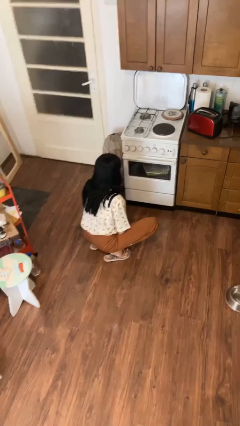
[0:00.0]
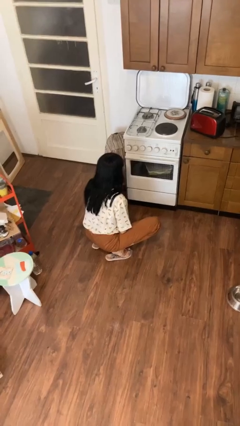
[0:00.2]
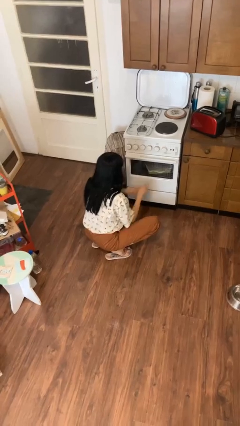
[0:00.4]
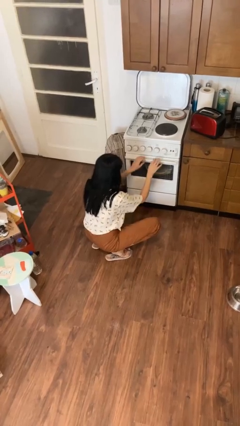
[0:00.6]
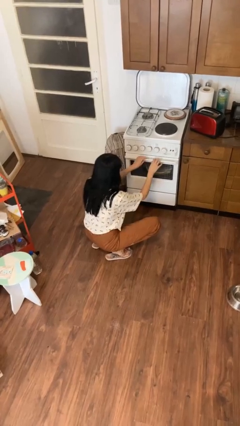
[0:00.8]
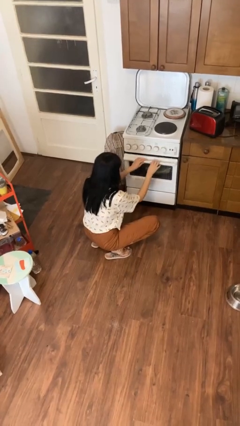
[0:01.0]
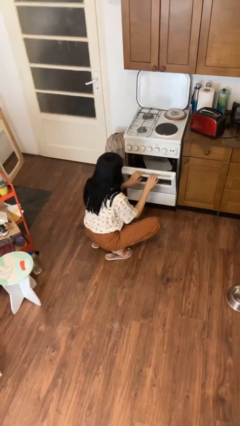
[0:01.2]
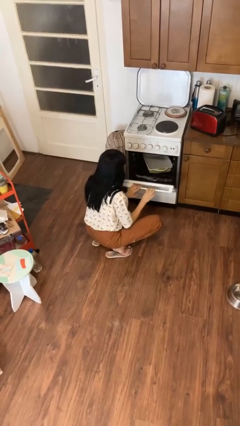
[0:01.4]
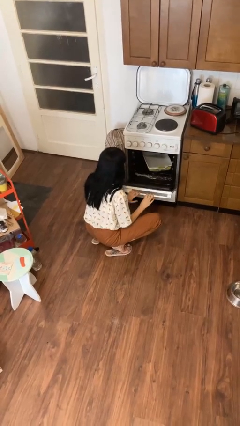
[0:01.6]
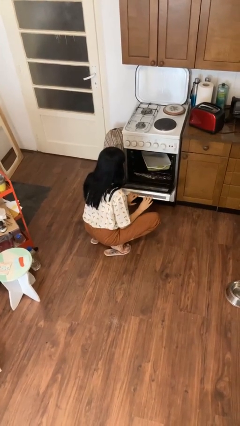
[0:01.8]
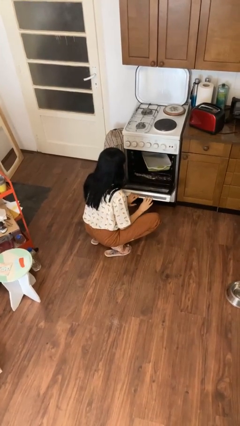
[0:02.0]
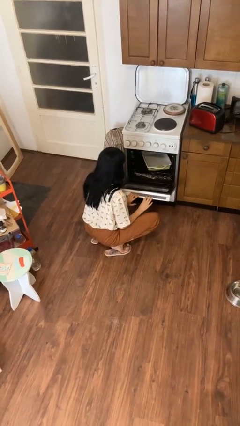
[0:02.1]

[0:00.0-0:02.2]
person opens oven door

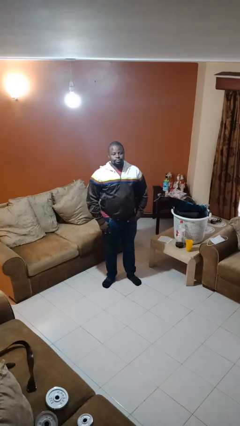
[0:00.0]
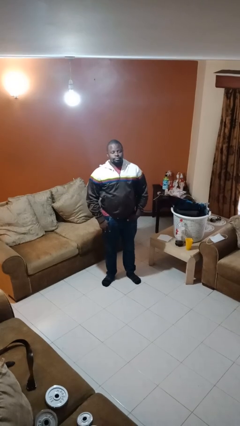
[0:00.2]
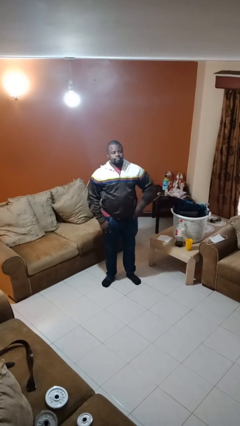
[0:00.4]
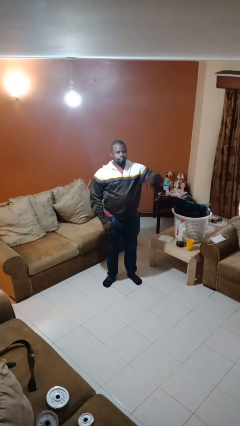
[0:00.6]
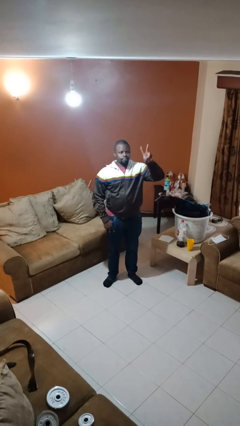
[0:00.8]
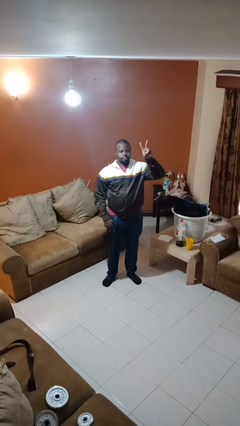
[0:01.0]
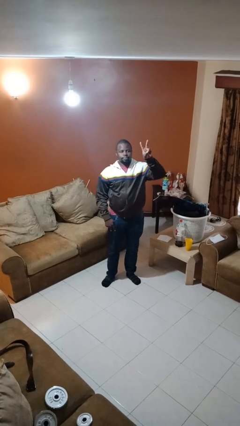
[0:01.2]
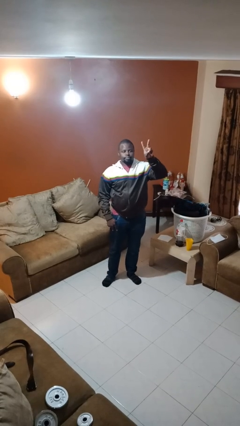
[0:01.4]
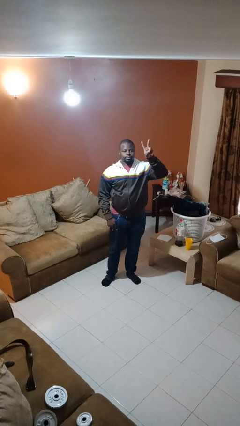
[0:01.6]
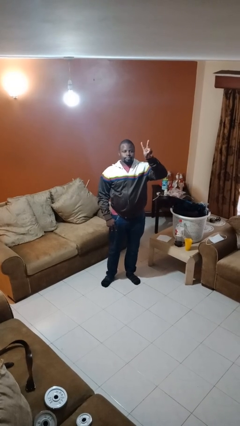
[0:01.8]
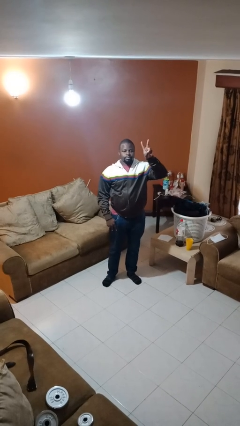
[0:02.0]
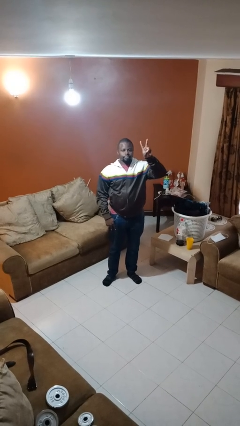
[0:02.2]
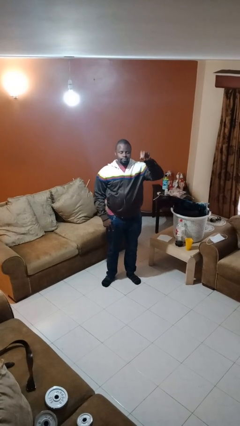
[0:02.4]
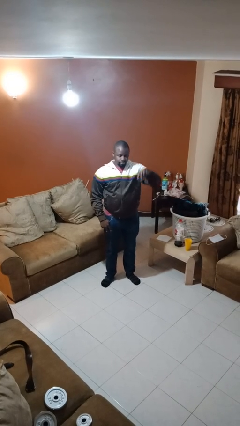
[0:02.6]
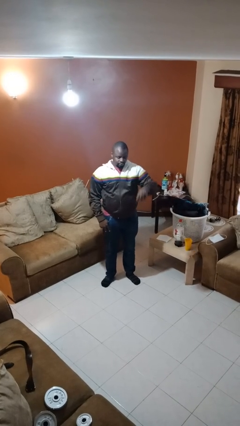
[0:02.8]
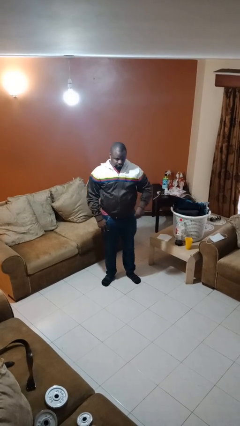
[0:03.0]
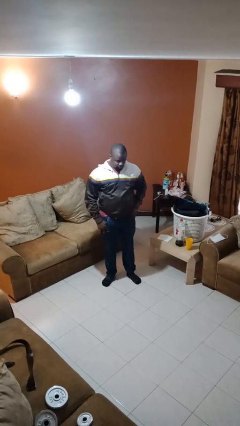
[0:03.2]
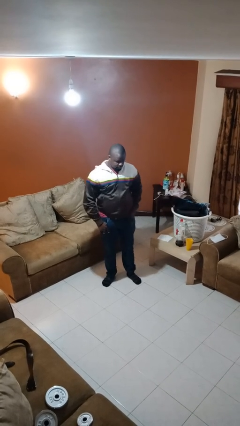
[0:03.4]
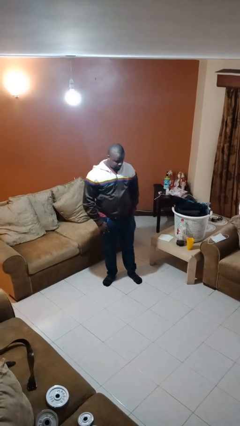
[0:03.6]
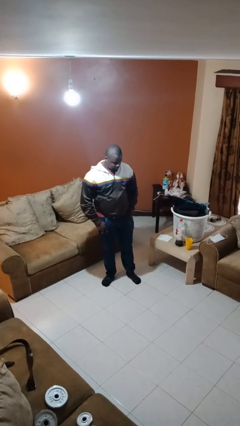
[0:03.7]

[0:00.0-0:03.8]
person gestures peace

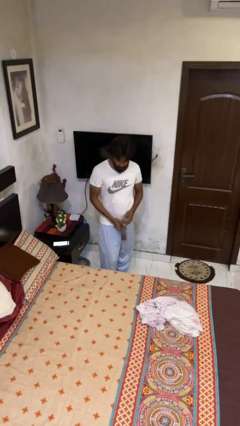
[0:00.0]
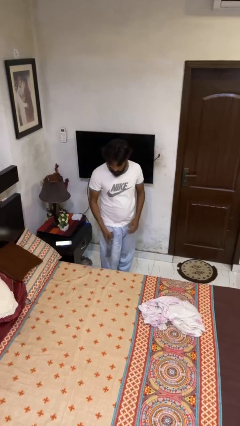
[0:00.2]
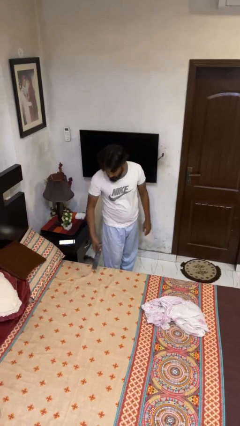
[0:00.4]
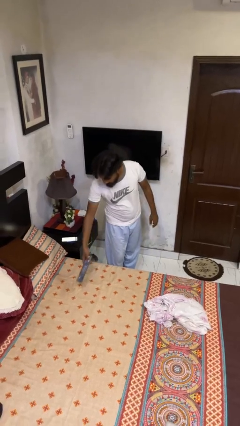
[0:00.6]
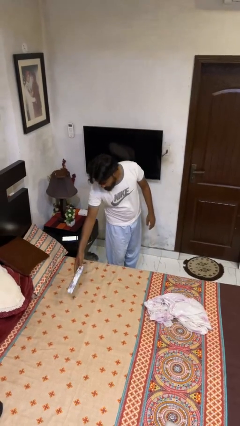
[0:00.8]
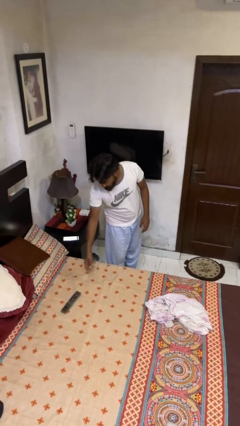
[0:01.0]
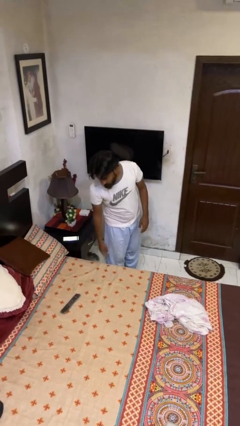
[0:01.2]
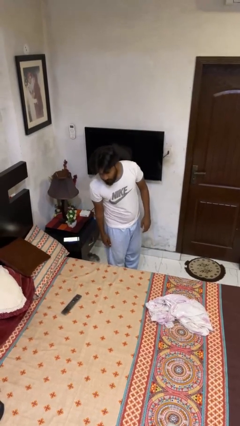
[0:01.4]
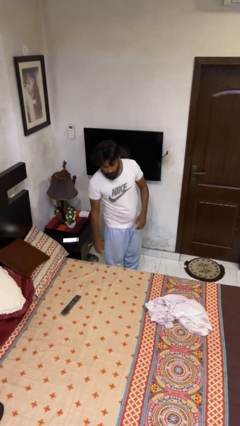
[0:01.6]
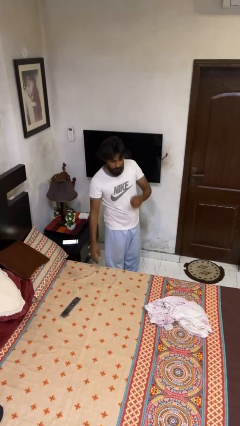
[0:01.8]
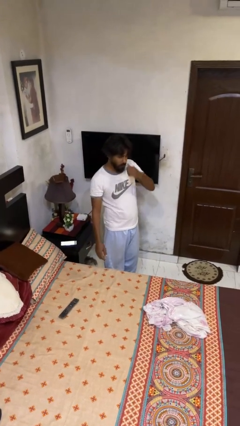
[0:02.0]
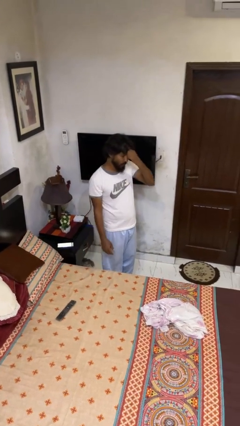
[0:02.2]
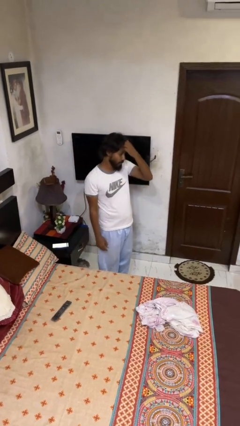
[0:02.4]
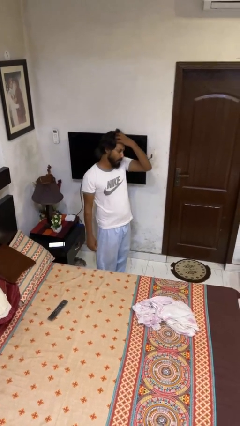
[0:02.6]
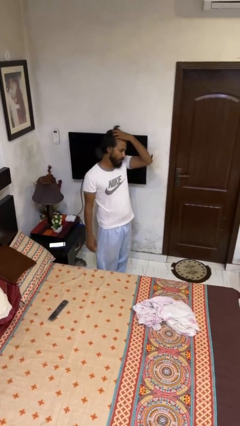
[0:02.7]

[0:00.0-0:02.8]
person puts down object on bed

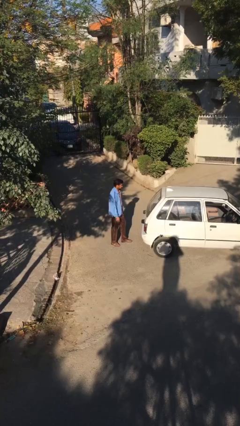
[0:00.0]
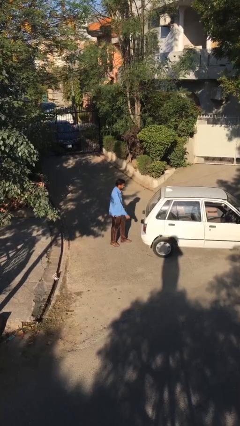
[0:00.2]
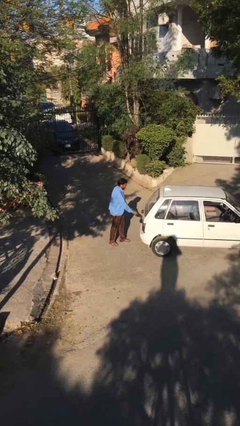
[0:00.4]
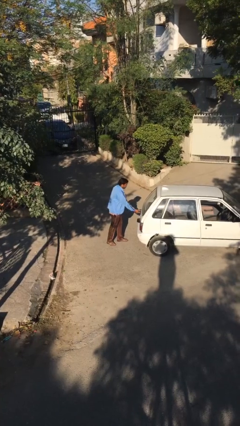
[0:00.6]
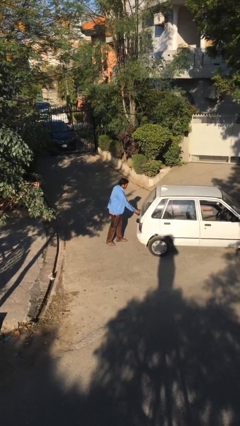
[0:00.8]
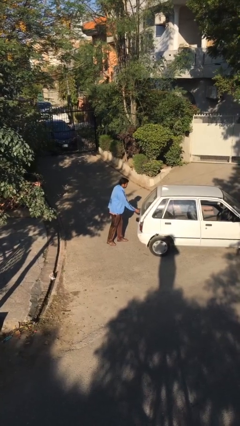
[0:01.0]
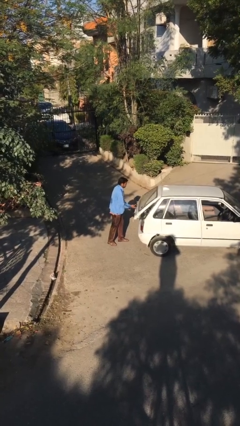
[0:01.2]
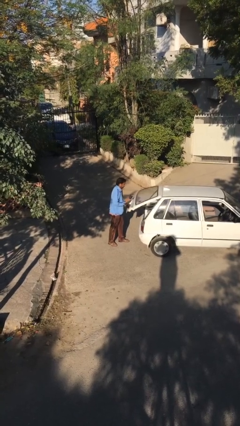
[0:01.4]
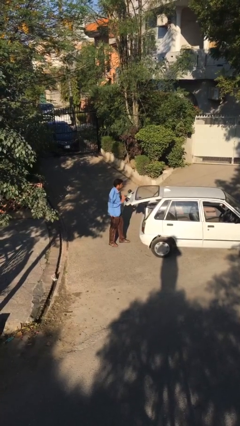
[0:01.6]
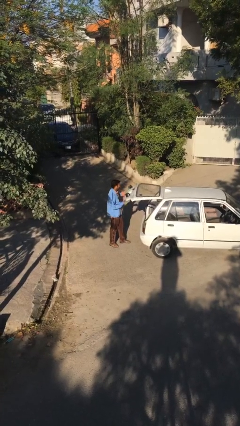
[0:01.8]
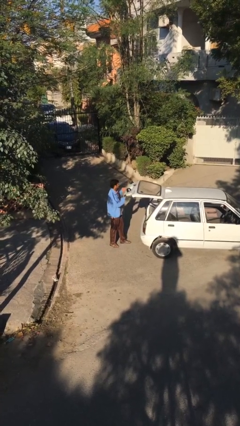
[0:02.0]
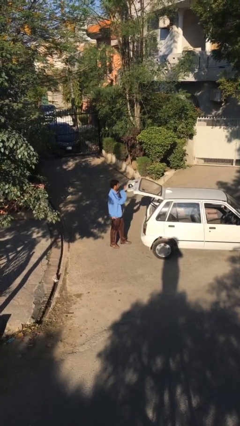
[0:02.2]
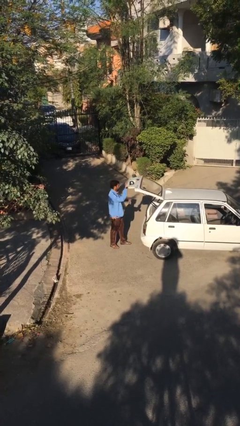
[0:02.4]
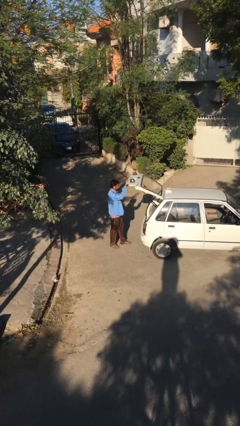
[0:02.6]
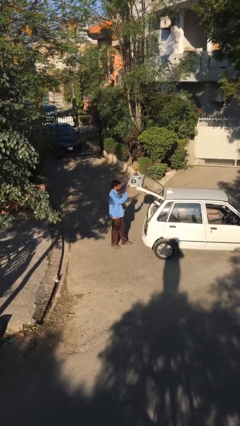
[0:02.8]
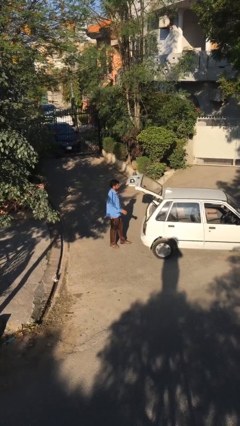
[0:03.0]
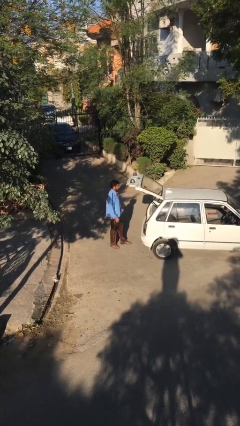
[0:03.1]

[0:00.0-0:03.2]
person opens car trunk

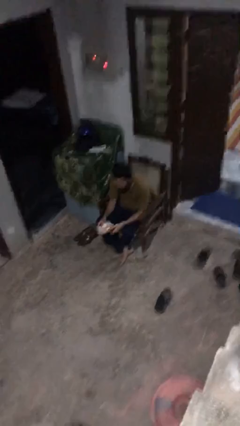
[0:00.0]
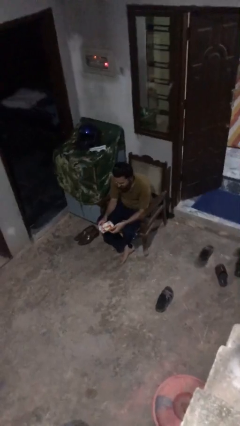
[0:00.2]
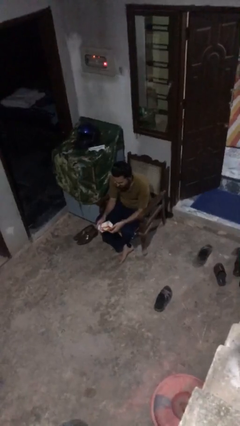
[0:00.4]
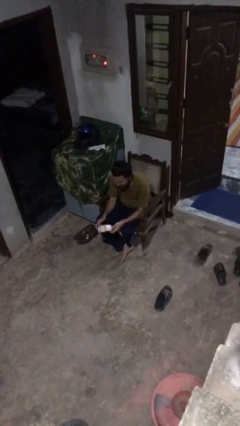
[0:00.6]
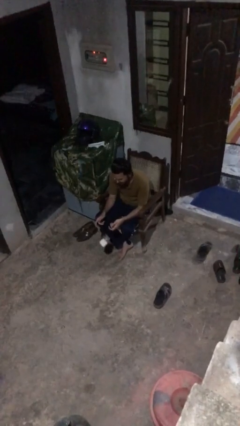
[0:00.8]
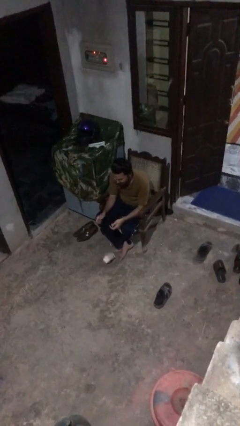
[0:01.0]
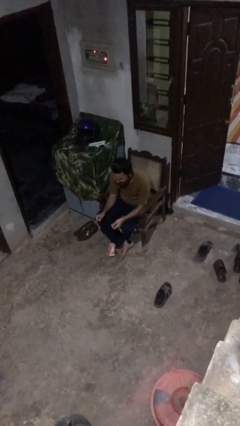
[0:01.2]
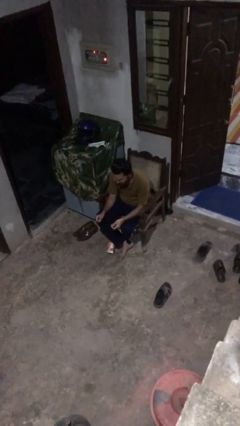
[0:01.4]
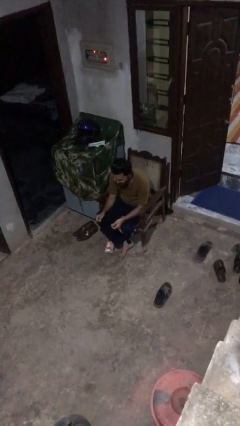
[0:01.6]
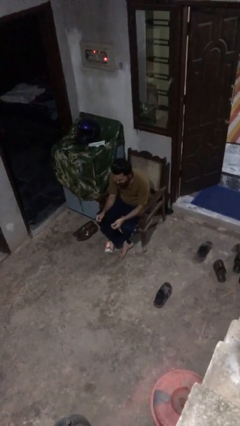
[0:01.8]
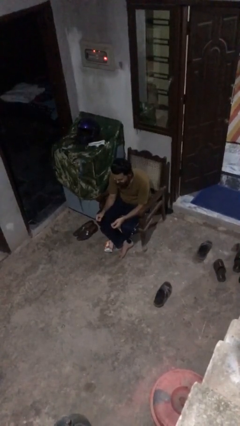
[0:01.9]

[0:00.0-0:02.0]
person drops object

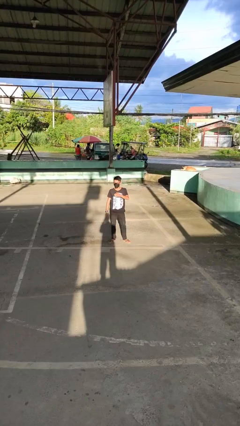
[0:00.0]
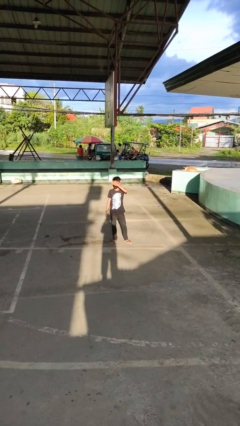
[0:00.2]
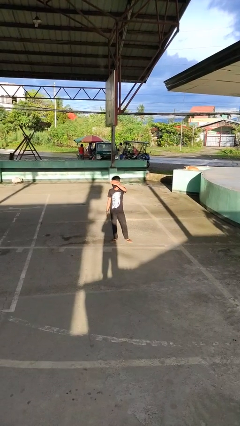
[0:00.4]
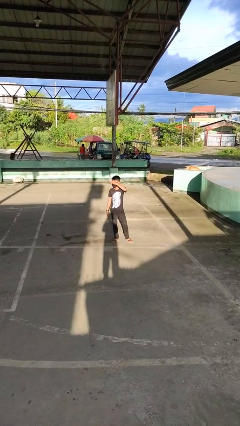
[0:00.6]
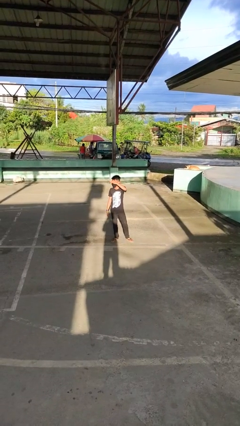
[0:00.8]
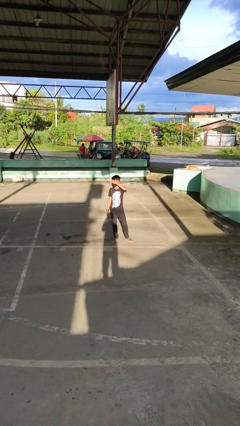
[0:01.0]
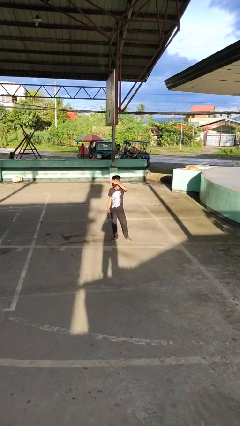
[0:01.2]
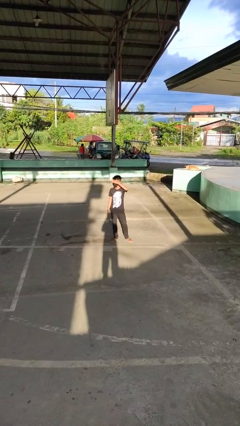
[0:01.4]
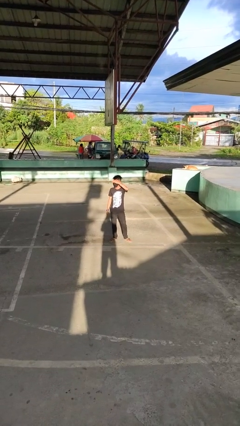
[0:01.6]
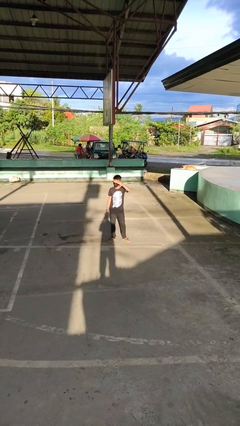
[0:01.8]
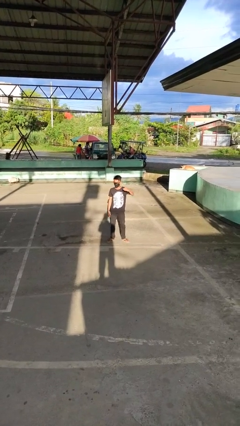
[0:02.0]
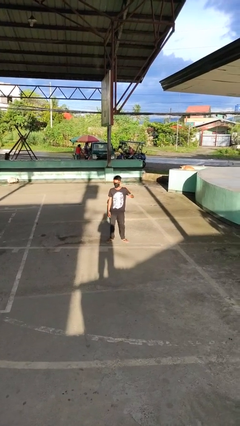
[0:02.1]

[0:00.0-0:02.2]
person shades eyes

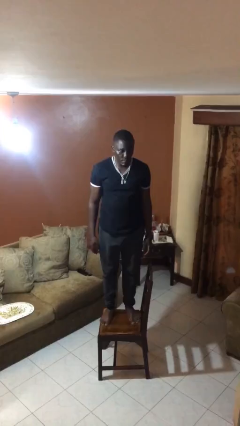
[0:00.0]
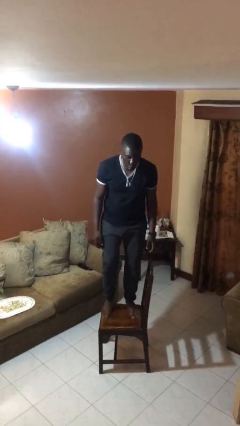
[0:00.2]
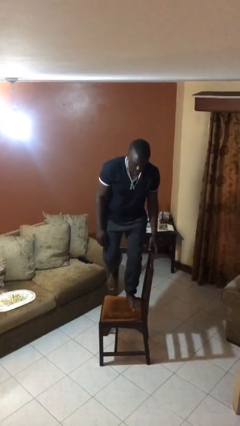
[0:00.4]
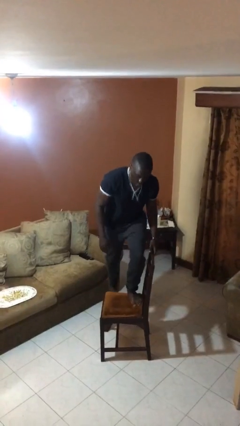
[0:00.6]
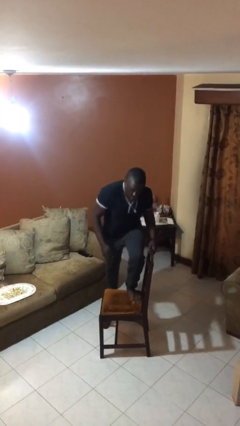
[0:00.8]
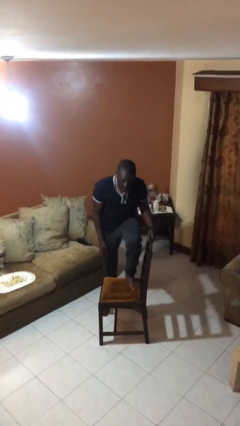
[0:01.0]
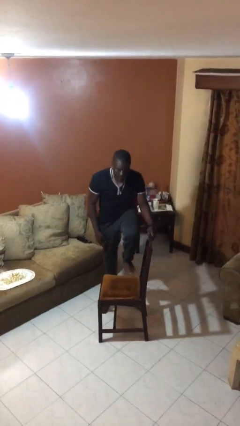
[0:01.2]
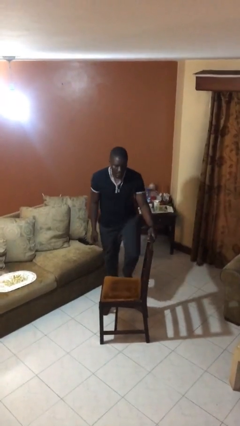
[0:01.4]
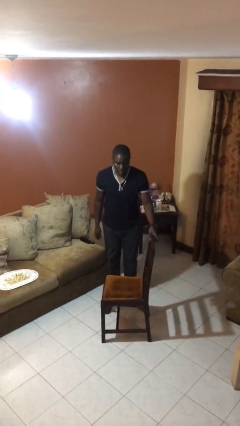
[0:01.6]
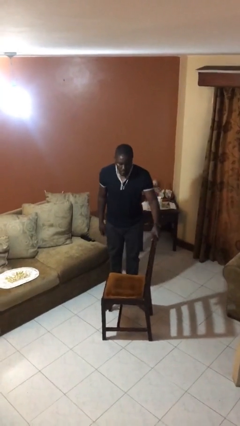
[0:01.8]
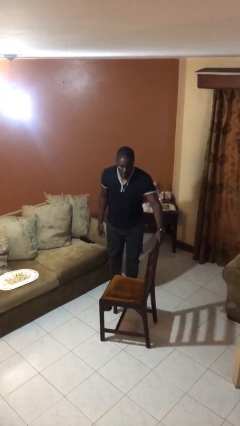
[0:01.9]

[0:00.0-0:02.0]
person climbs off chair
